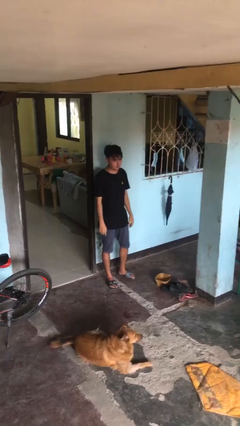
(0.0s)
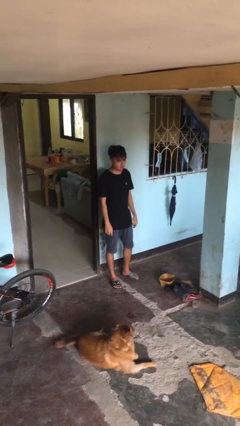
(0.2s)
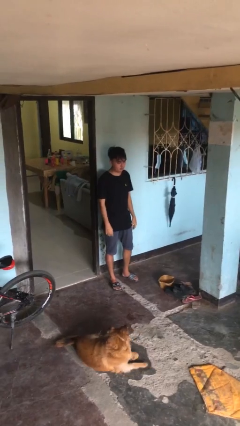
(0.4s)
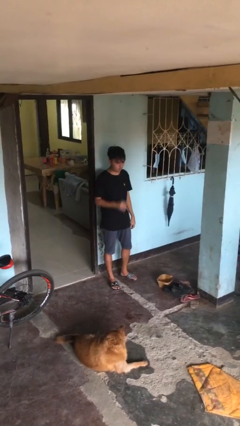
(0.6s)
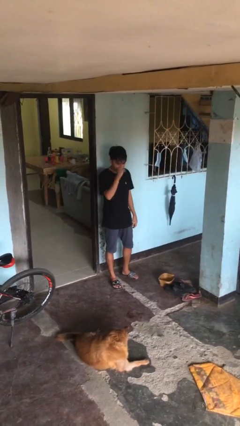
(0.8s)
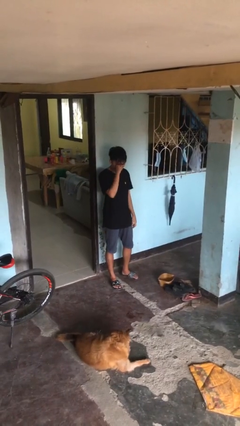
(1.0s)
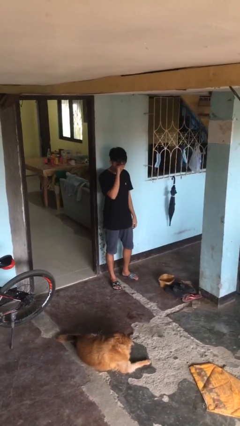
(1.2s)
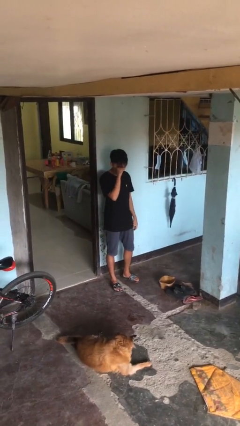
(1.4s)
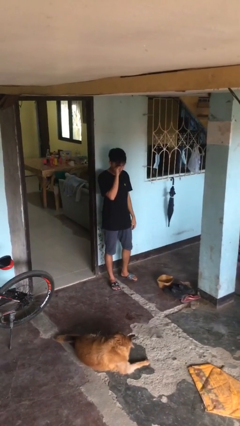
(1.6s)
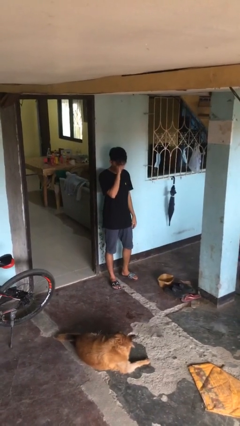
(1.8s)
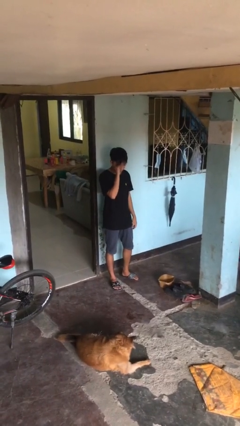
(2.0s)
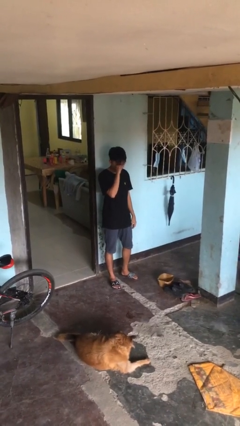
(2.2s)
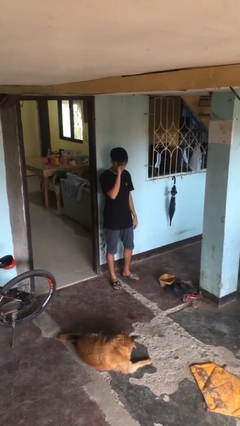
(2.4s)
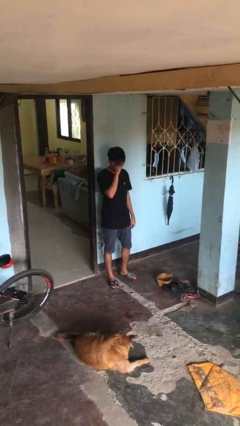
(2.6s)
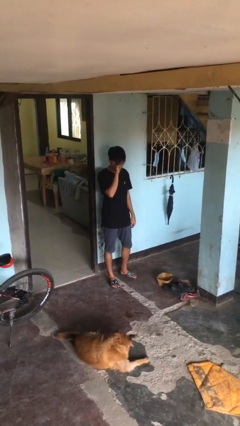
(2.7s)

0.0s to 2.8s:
person rubs eyes

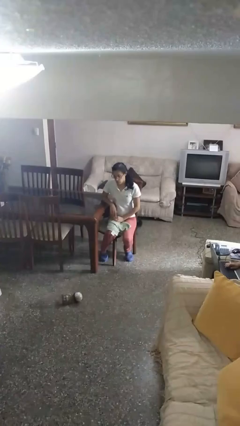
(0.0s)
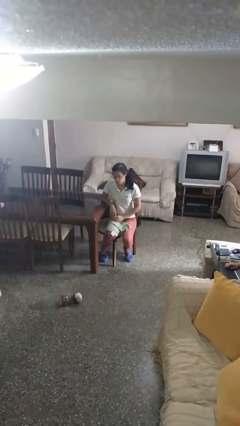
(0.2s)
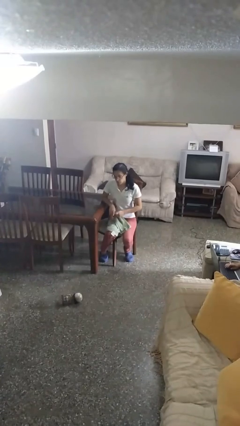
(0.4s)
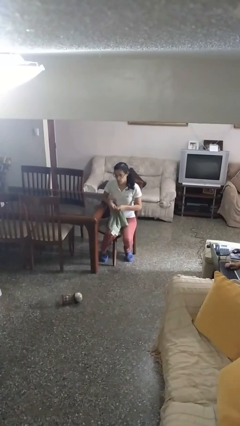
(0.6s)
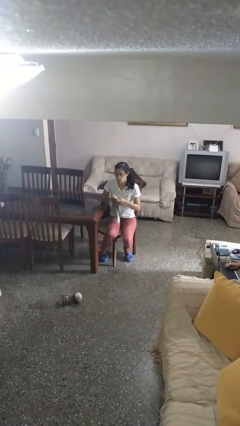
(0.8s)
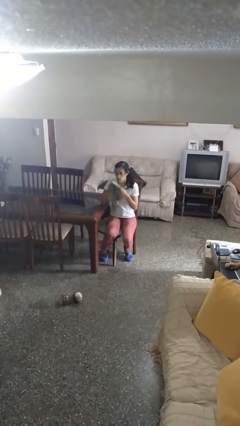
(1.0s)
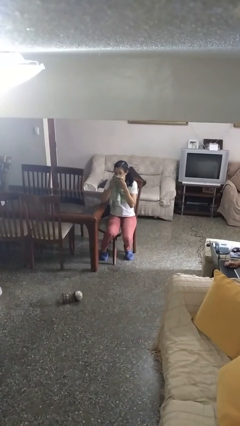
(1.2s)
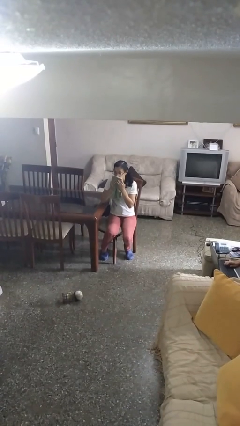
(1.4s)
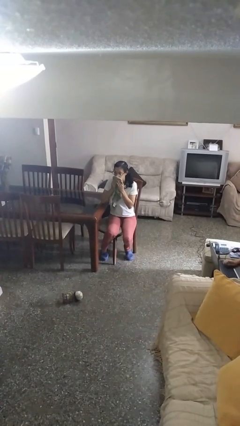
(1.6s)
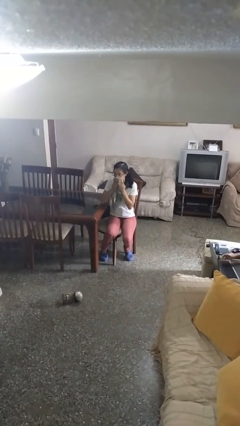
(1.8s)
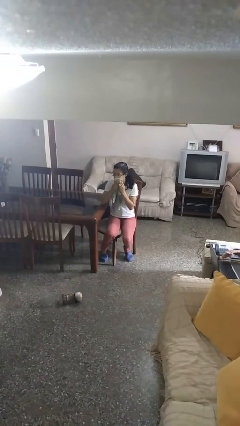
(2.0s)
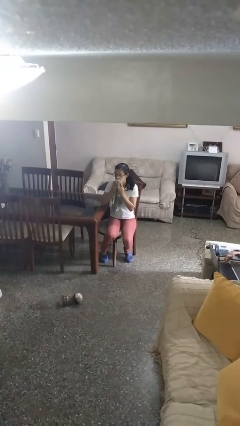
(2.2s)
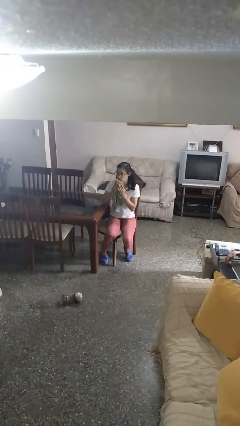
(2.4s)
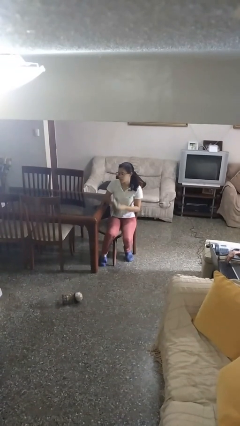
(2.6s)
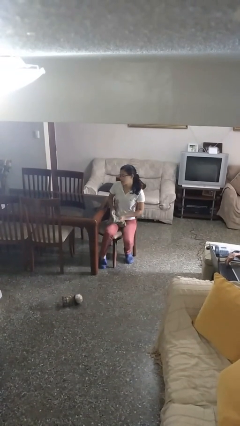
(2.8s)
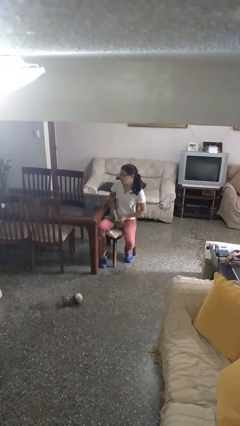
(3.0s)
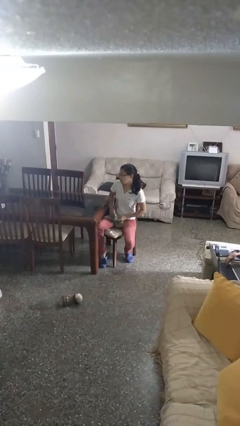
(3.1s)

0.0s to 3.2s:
person wipes mouth with napkin

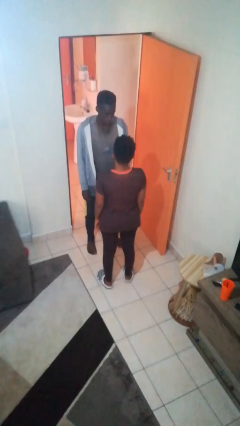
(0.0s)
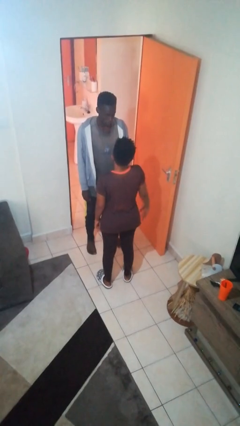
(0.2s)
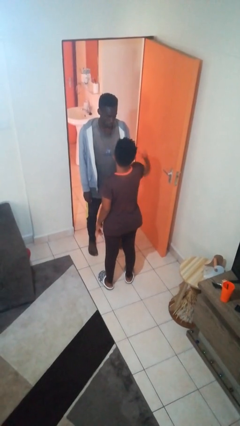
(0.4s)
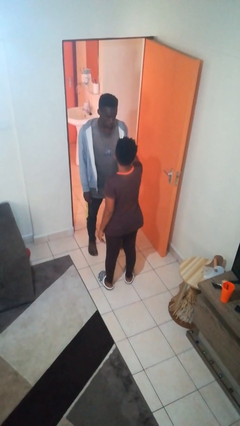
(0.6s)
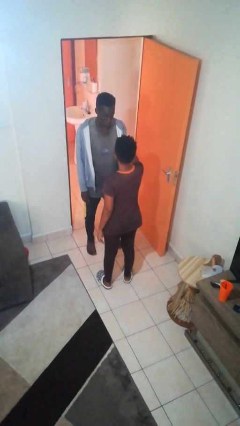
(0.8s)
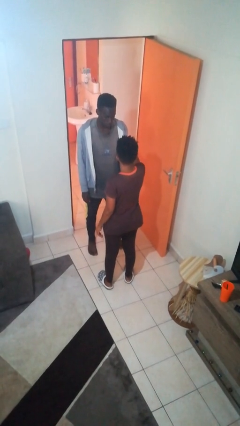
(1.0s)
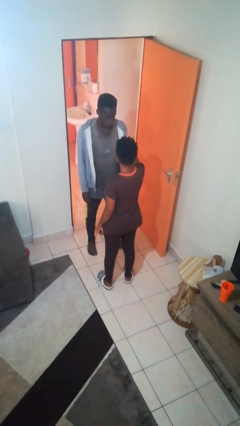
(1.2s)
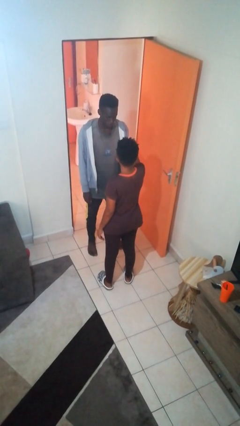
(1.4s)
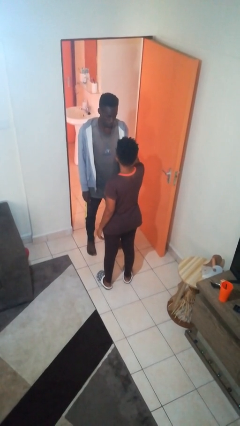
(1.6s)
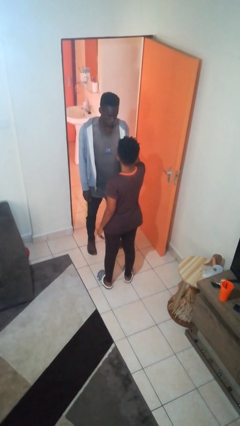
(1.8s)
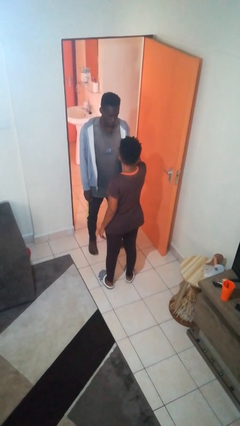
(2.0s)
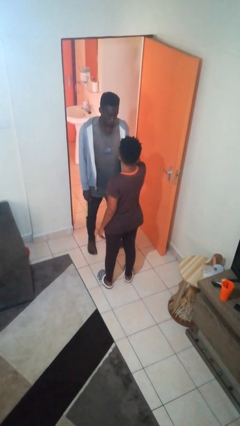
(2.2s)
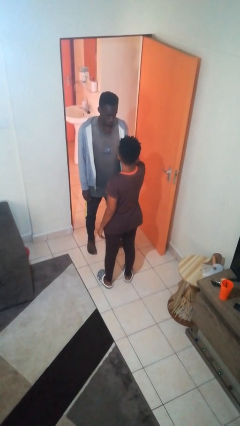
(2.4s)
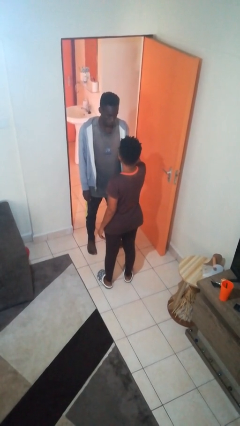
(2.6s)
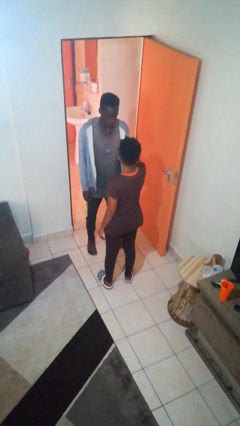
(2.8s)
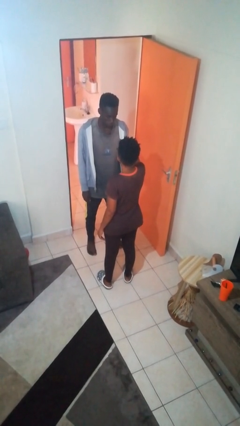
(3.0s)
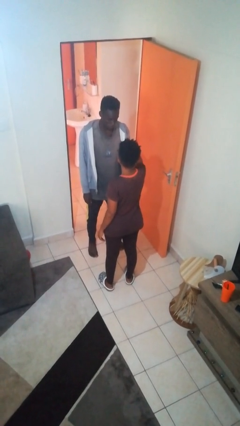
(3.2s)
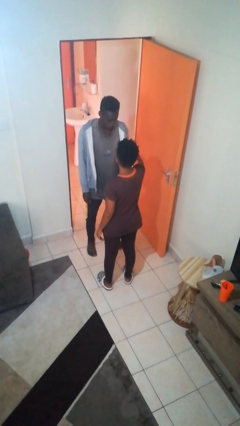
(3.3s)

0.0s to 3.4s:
person grabs person by bicep

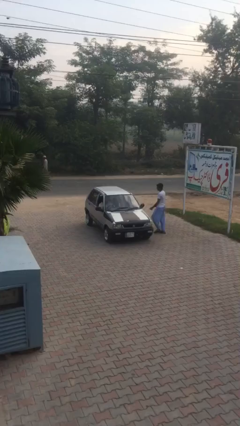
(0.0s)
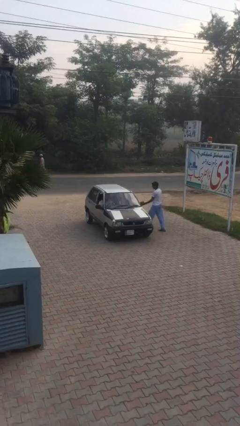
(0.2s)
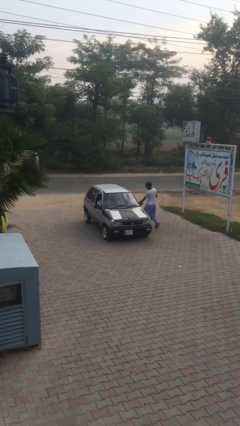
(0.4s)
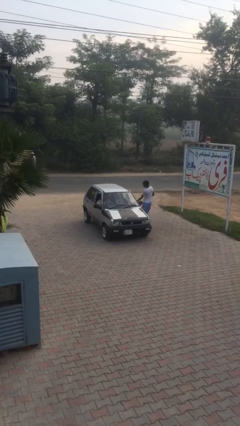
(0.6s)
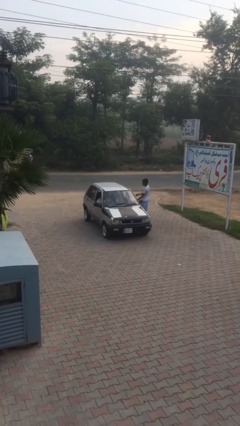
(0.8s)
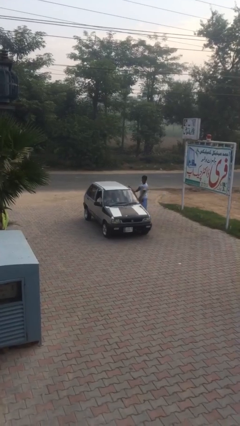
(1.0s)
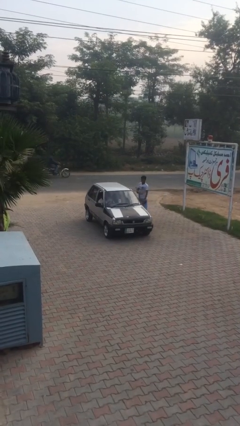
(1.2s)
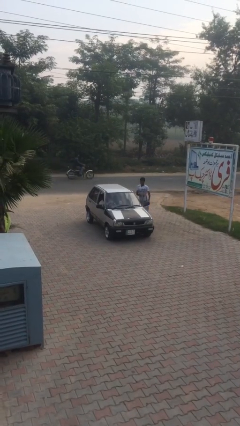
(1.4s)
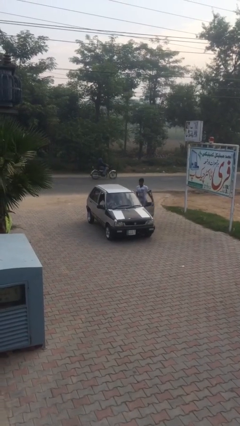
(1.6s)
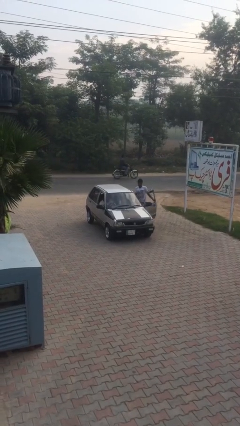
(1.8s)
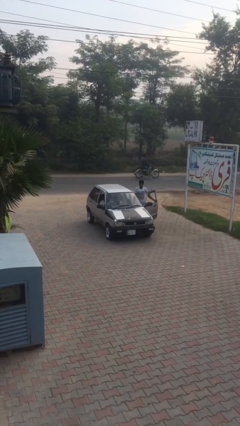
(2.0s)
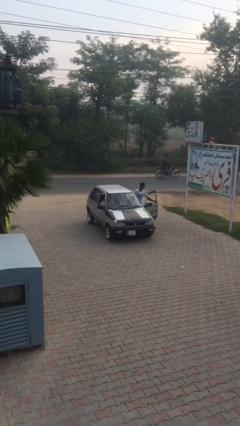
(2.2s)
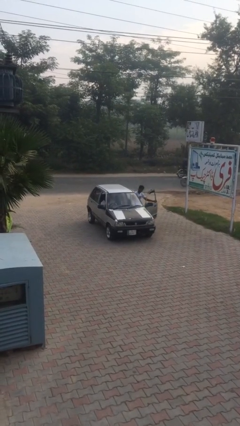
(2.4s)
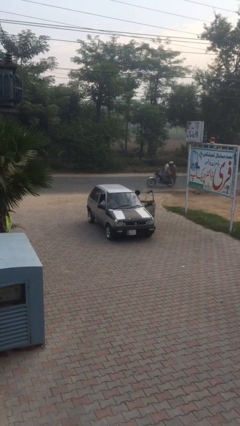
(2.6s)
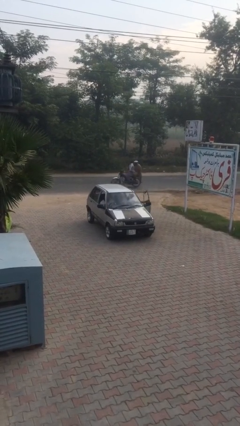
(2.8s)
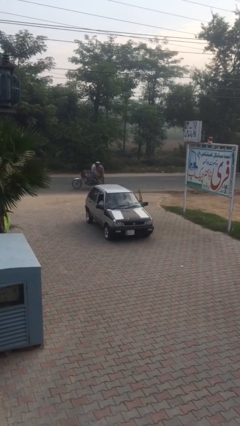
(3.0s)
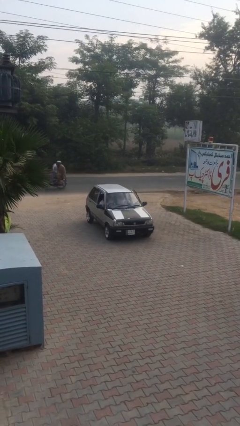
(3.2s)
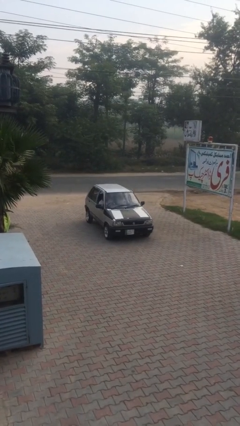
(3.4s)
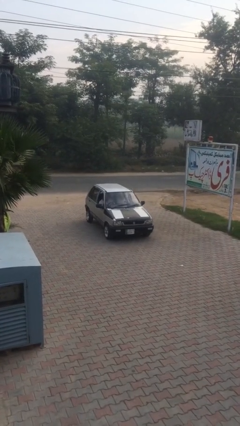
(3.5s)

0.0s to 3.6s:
car picks up person

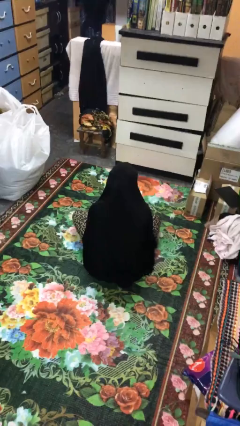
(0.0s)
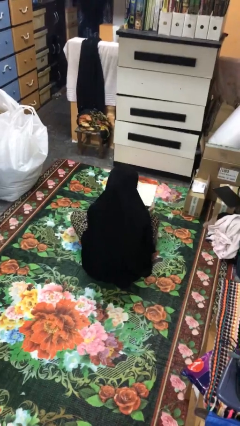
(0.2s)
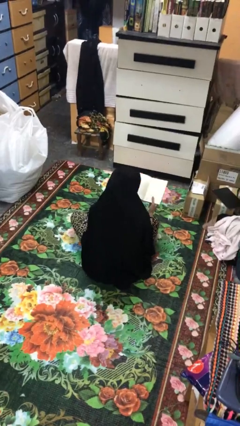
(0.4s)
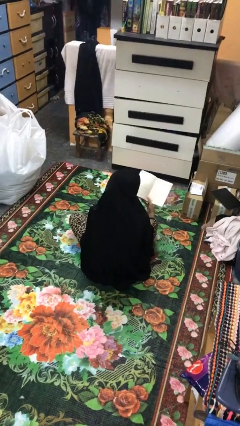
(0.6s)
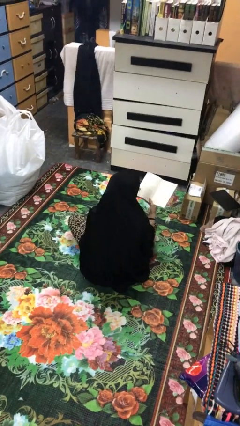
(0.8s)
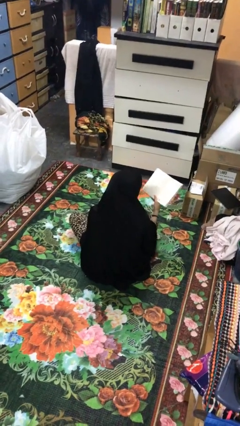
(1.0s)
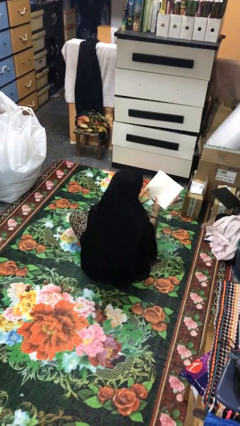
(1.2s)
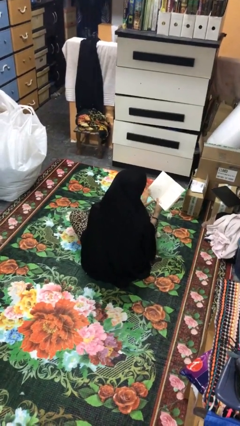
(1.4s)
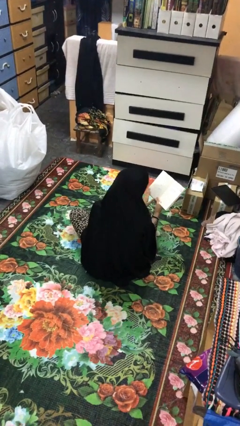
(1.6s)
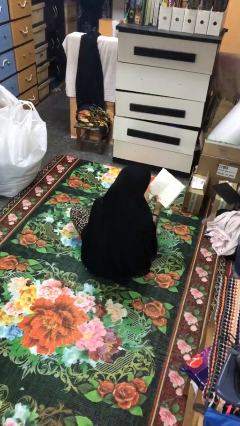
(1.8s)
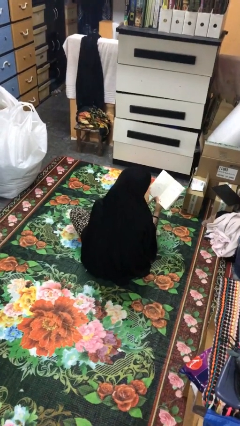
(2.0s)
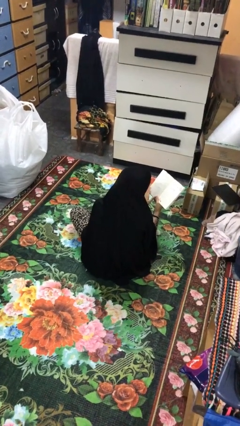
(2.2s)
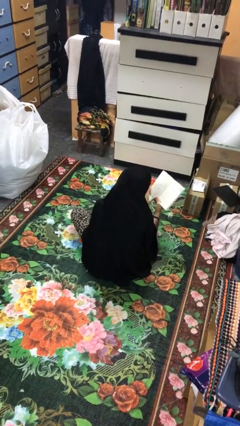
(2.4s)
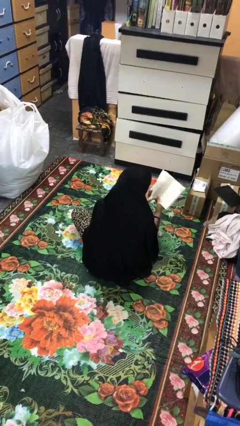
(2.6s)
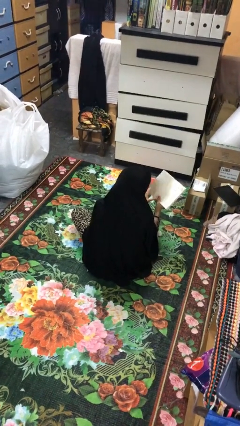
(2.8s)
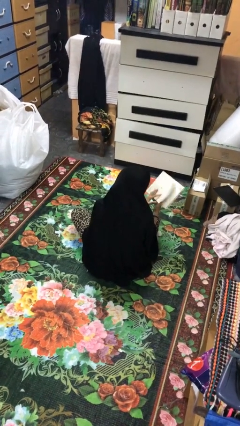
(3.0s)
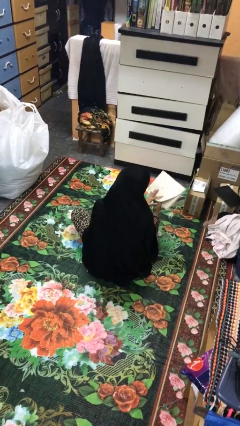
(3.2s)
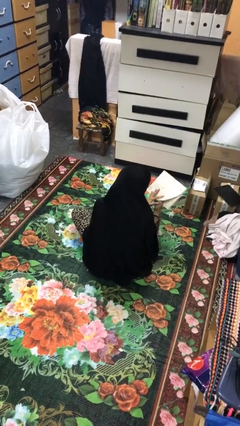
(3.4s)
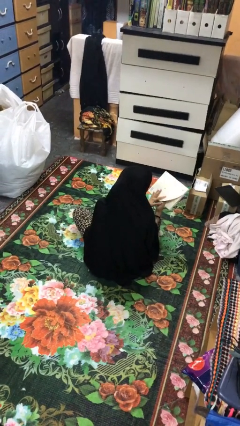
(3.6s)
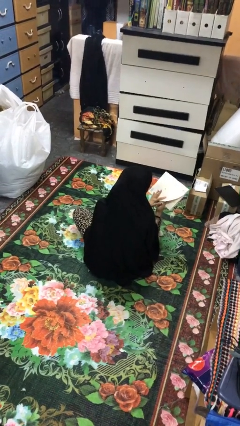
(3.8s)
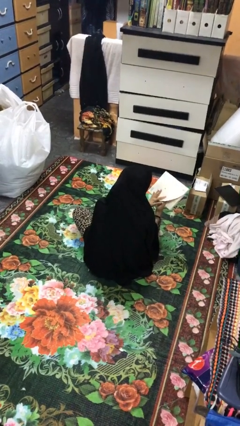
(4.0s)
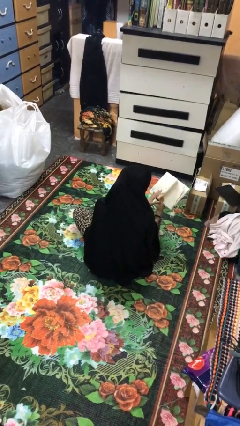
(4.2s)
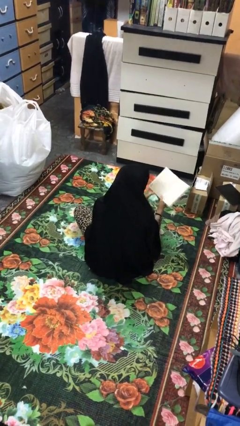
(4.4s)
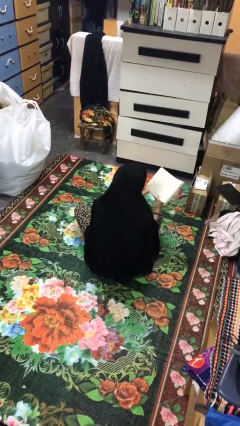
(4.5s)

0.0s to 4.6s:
person reads book
